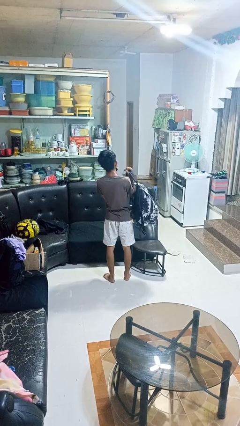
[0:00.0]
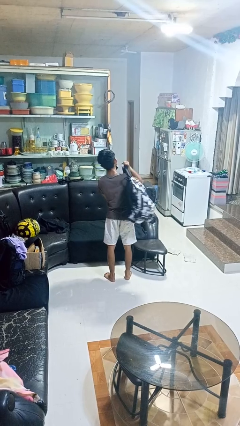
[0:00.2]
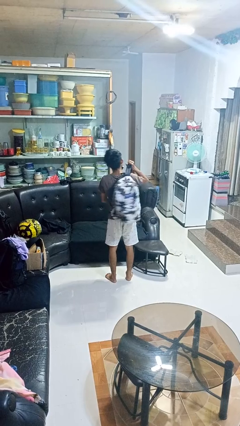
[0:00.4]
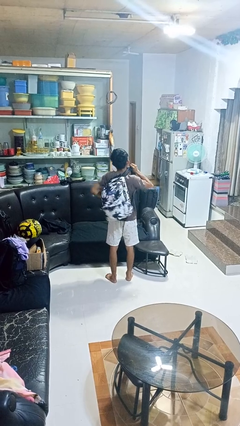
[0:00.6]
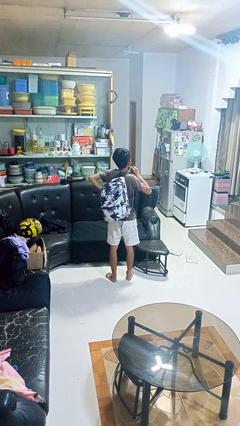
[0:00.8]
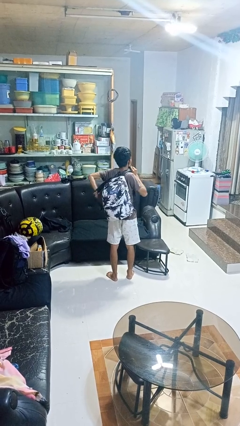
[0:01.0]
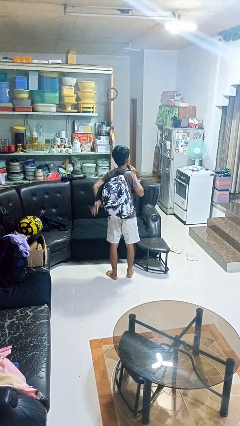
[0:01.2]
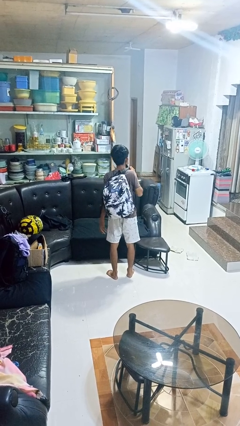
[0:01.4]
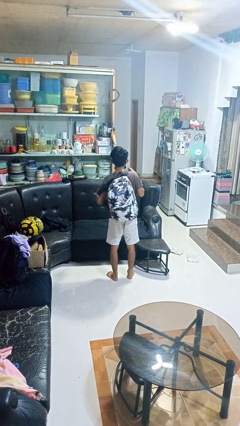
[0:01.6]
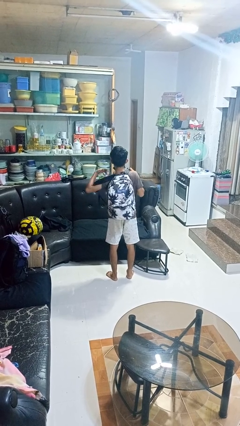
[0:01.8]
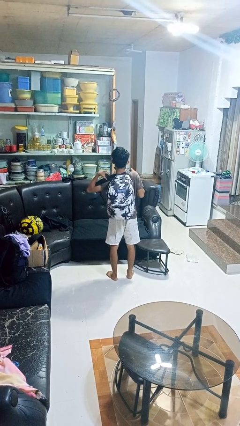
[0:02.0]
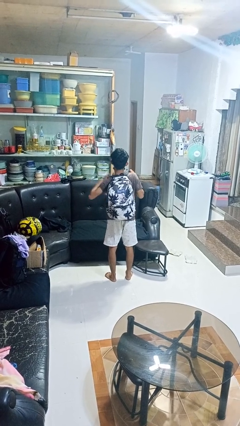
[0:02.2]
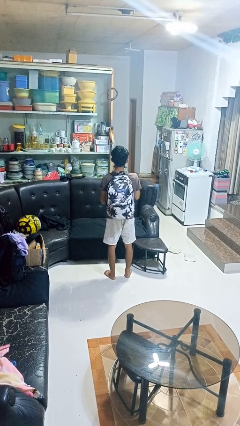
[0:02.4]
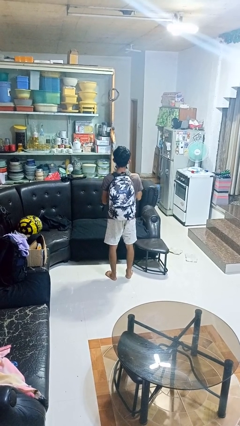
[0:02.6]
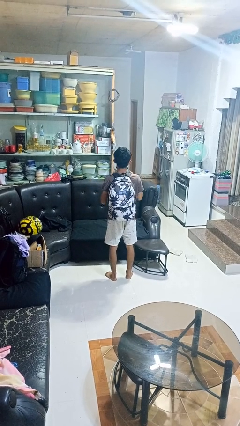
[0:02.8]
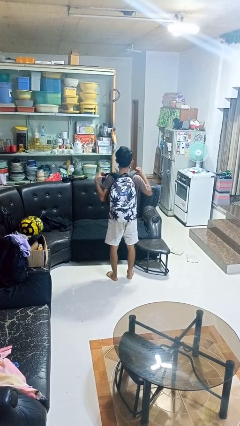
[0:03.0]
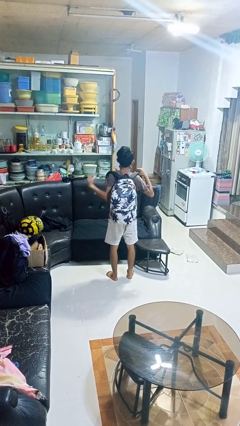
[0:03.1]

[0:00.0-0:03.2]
person puts on backpack

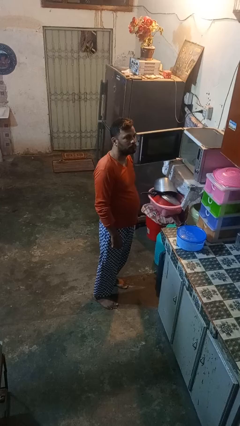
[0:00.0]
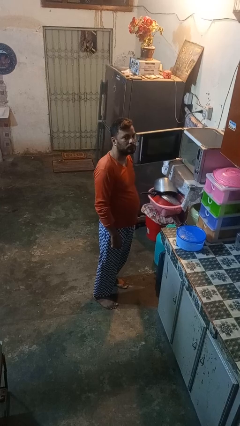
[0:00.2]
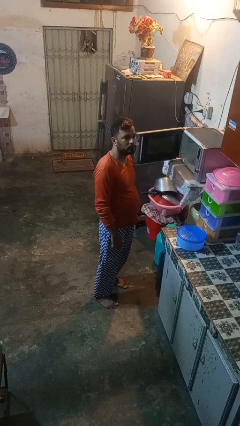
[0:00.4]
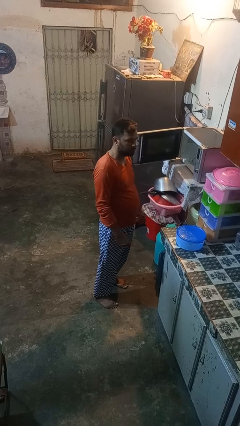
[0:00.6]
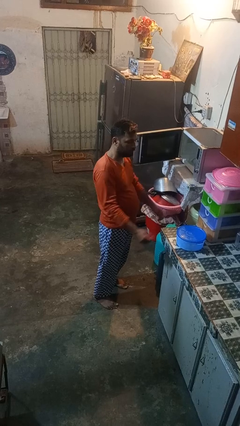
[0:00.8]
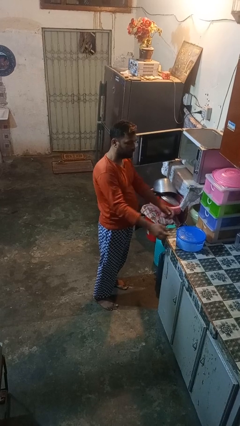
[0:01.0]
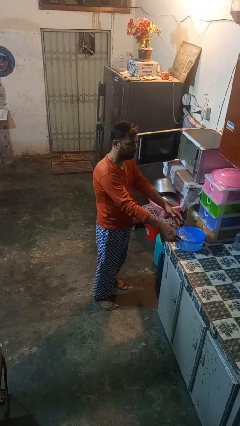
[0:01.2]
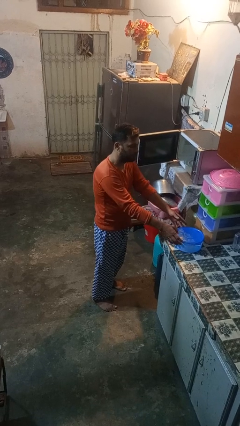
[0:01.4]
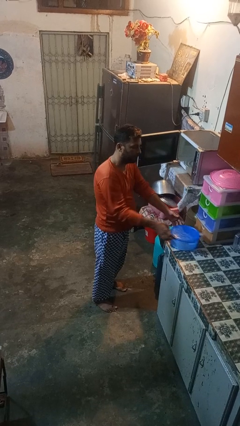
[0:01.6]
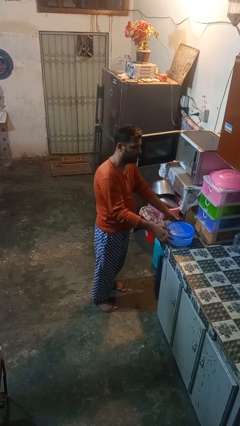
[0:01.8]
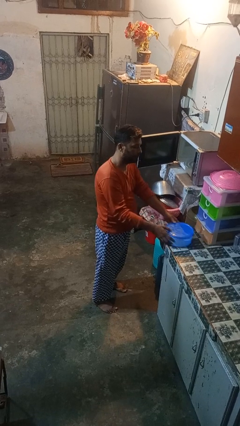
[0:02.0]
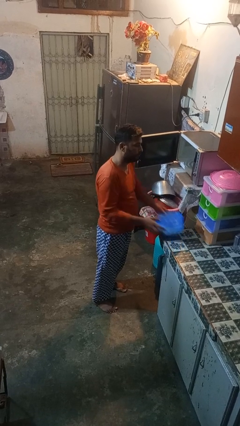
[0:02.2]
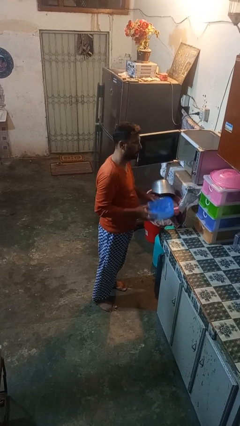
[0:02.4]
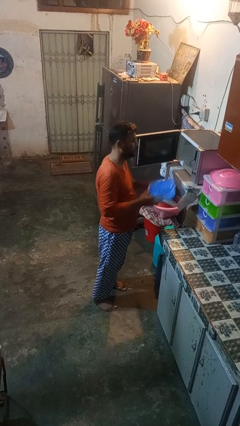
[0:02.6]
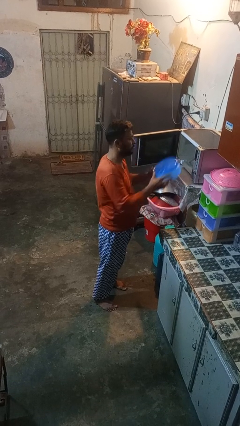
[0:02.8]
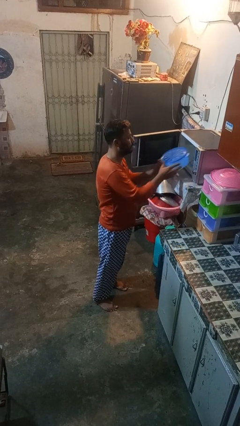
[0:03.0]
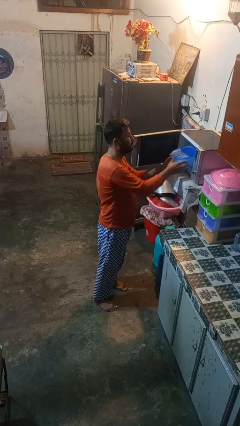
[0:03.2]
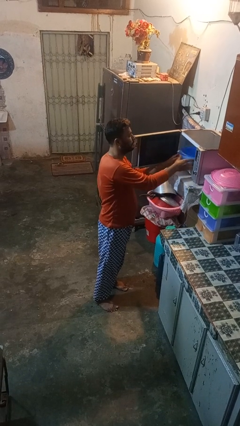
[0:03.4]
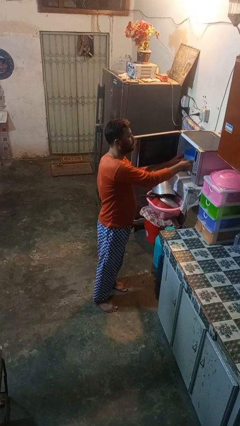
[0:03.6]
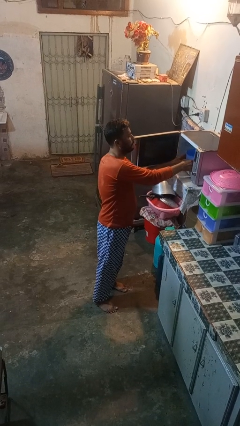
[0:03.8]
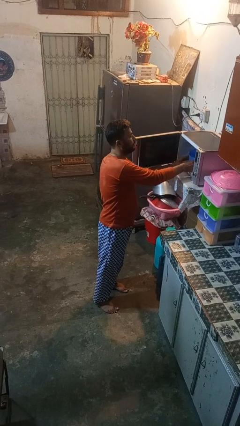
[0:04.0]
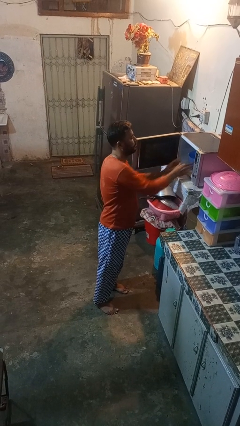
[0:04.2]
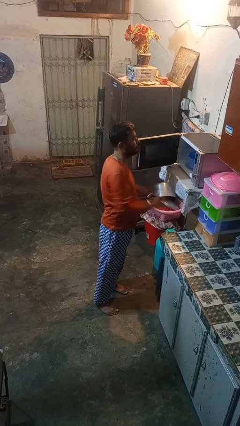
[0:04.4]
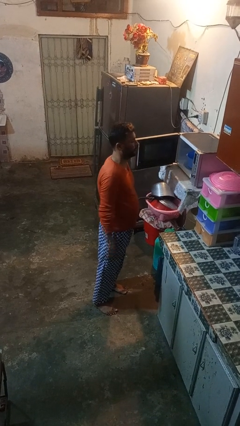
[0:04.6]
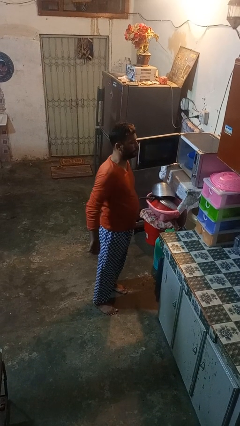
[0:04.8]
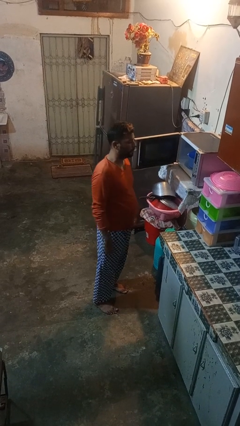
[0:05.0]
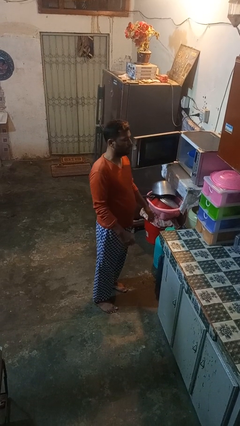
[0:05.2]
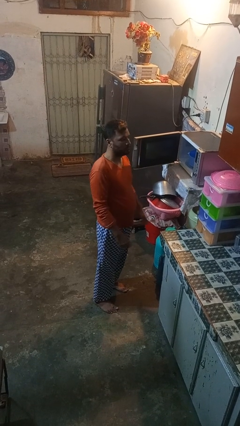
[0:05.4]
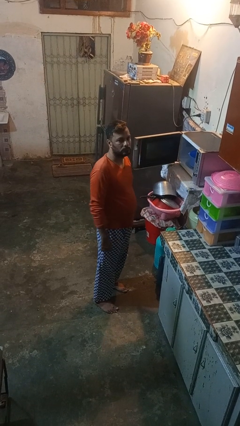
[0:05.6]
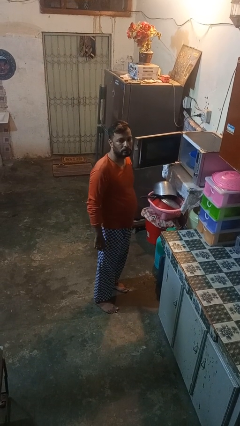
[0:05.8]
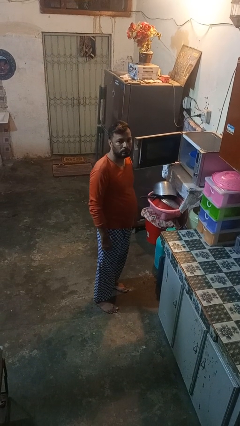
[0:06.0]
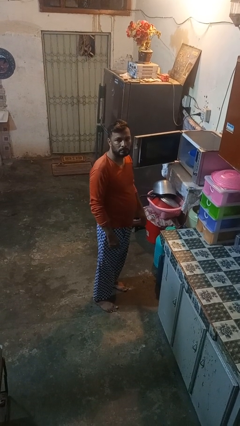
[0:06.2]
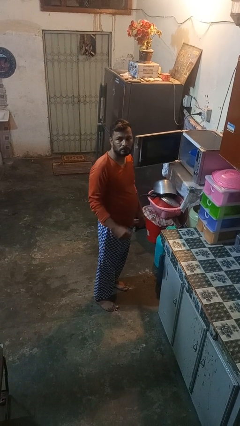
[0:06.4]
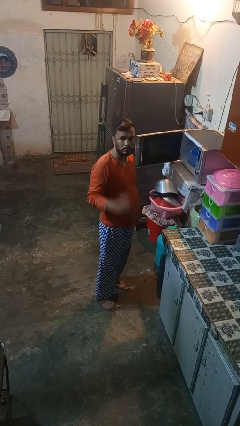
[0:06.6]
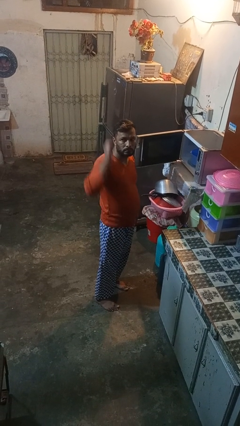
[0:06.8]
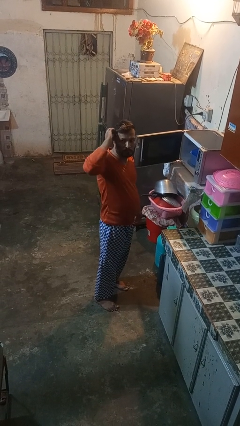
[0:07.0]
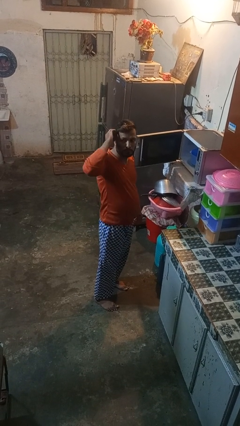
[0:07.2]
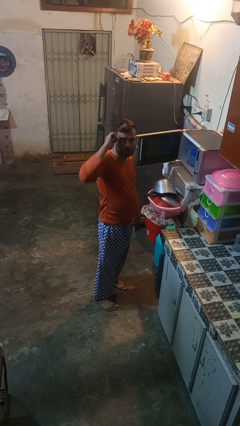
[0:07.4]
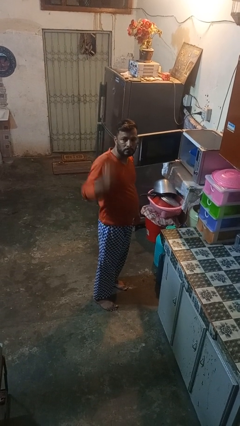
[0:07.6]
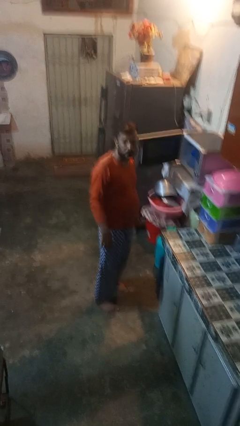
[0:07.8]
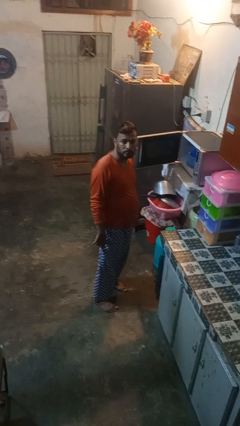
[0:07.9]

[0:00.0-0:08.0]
person puts object into microwave

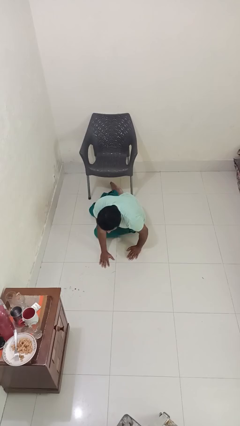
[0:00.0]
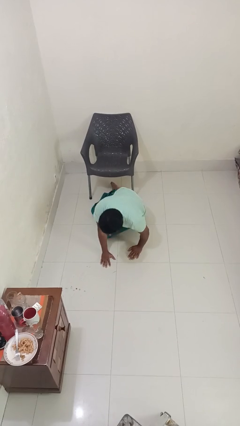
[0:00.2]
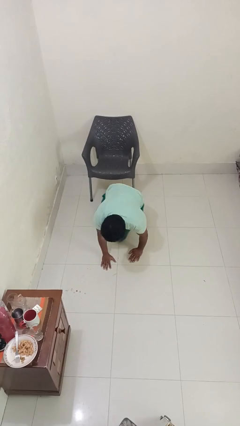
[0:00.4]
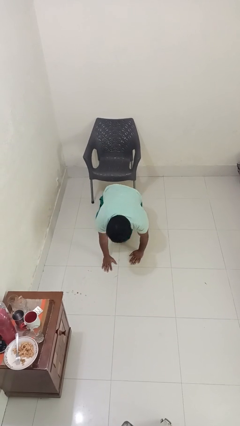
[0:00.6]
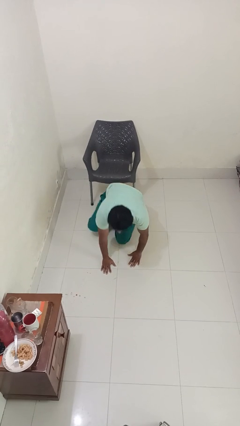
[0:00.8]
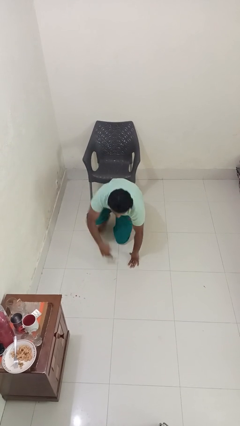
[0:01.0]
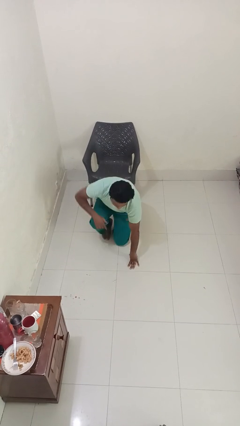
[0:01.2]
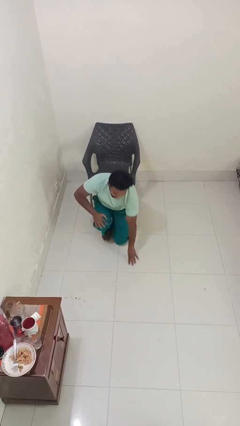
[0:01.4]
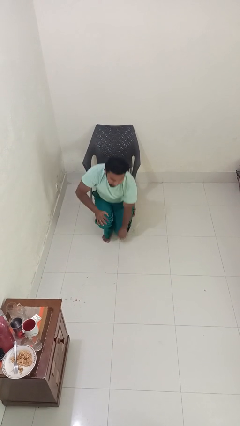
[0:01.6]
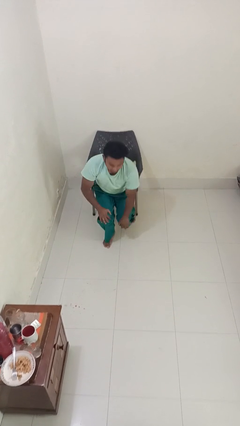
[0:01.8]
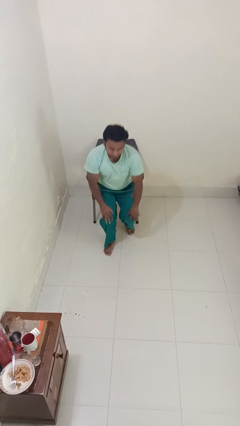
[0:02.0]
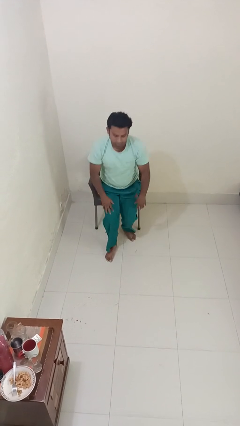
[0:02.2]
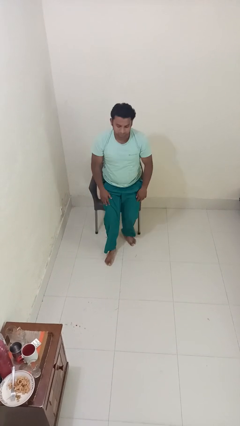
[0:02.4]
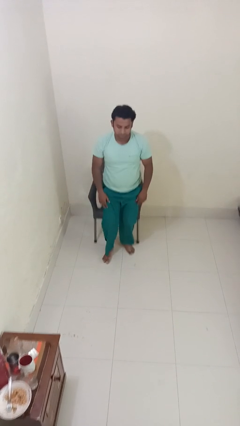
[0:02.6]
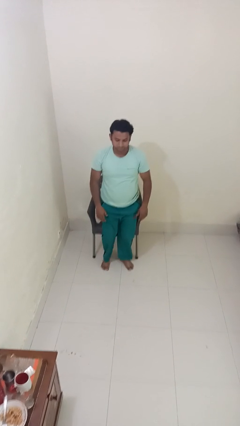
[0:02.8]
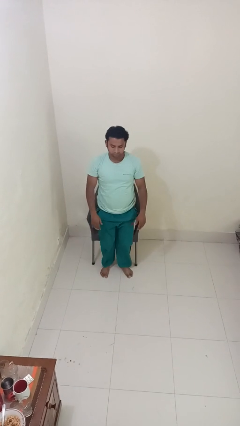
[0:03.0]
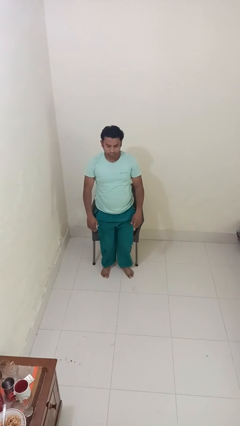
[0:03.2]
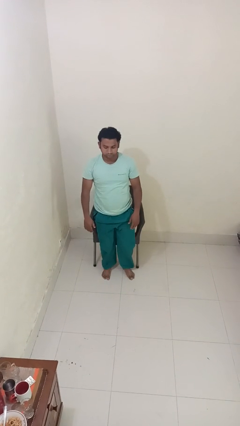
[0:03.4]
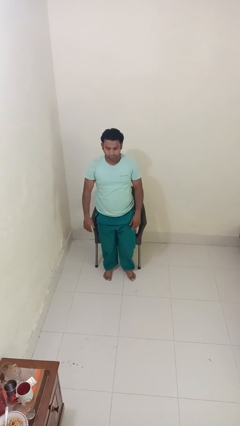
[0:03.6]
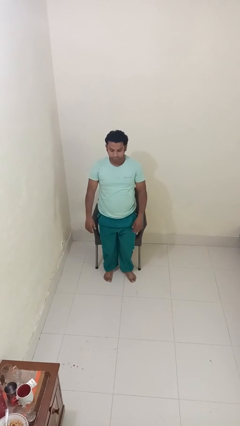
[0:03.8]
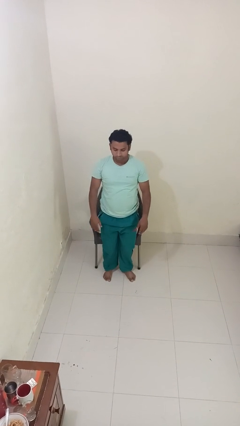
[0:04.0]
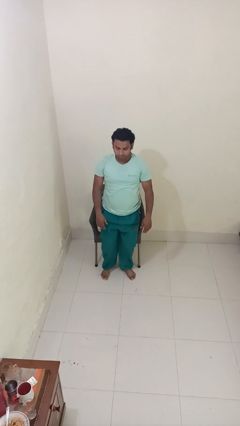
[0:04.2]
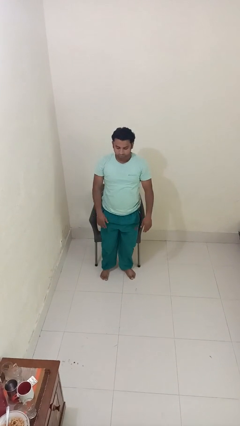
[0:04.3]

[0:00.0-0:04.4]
person stands up from floor

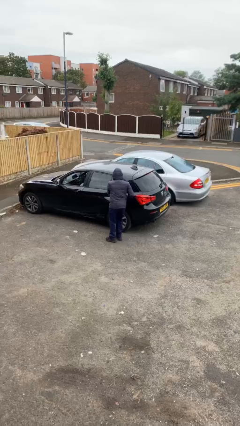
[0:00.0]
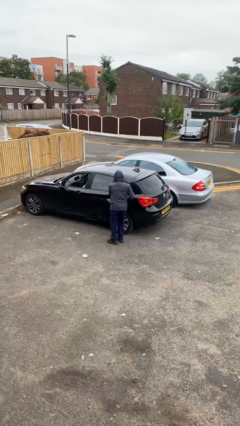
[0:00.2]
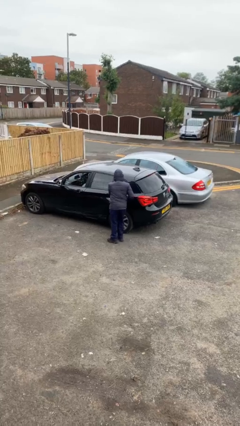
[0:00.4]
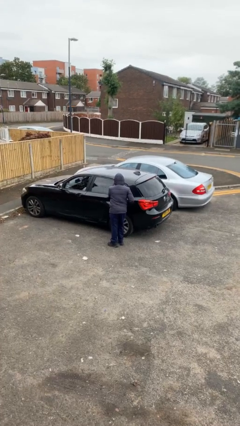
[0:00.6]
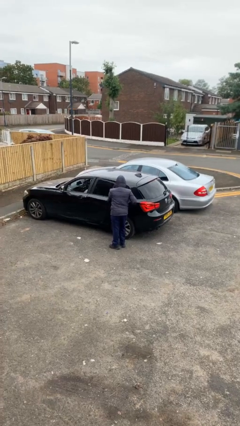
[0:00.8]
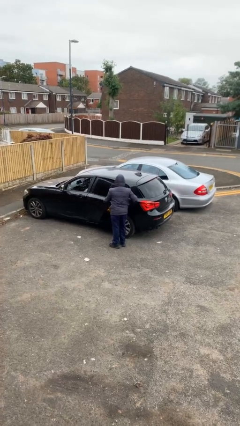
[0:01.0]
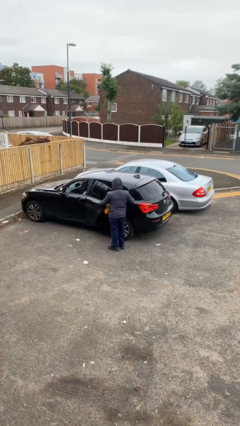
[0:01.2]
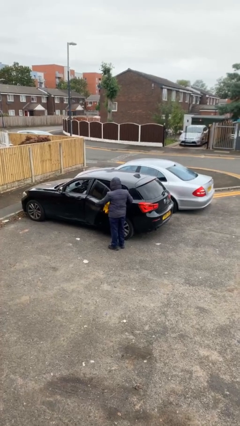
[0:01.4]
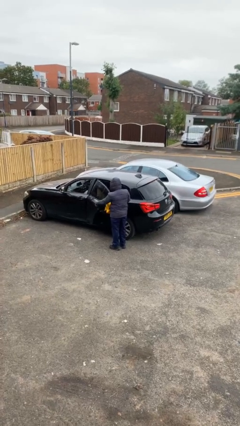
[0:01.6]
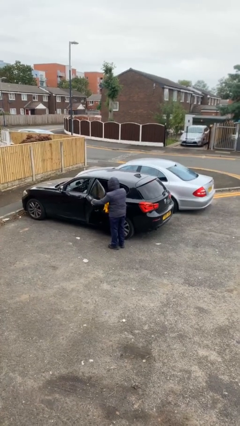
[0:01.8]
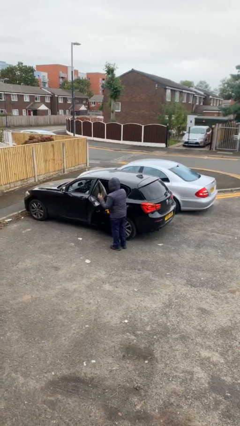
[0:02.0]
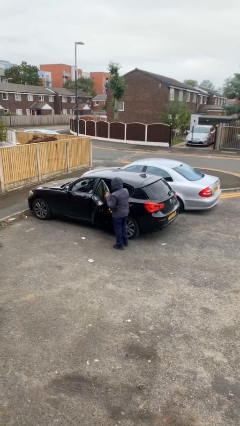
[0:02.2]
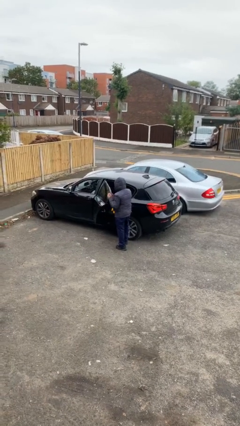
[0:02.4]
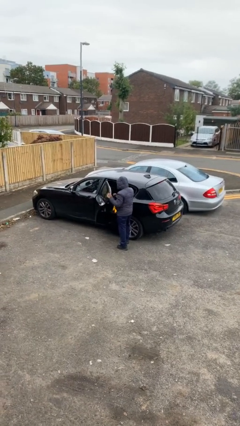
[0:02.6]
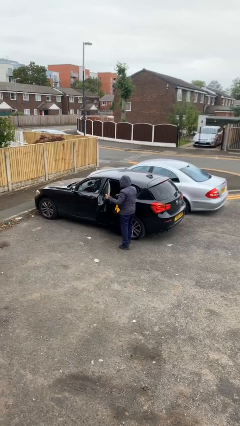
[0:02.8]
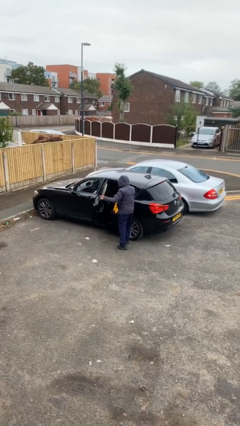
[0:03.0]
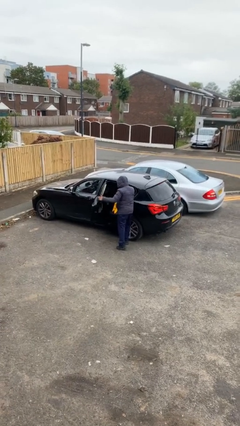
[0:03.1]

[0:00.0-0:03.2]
person opens car door
